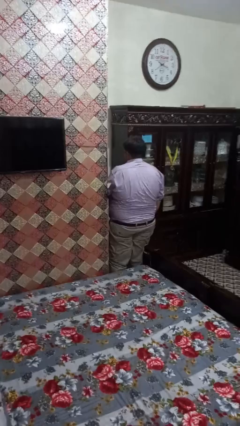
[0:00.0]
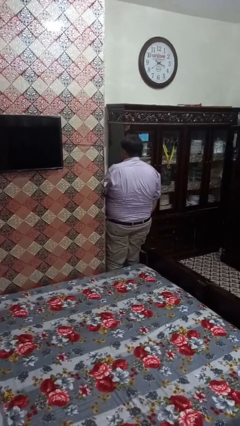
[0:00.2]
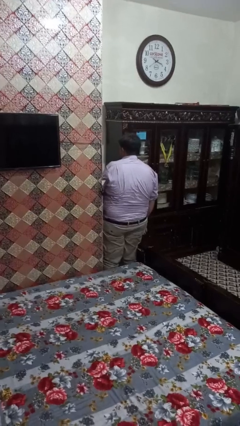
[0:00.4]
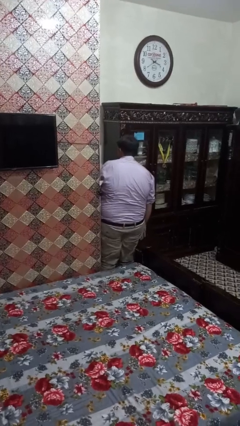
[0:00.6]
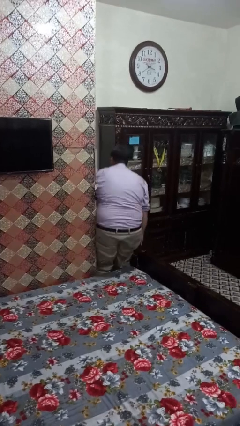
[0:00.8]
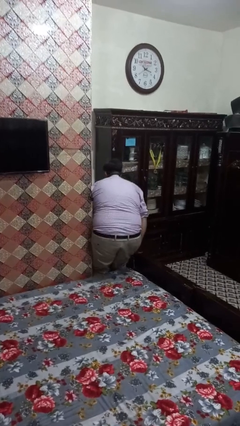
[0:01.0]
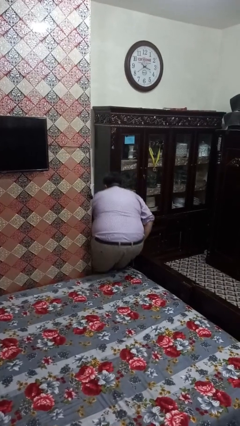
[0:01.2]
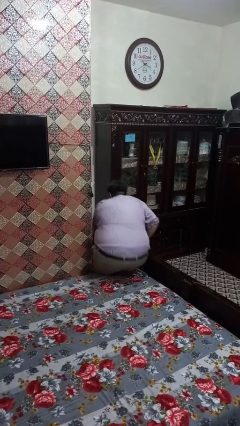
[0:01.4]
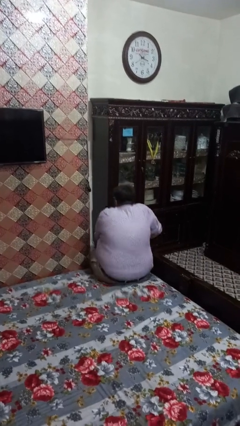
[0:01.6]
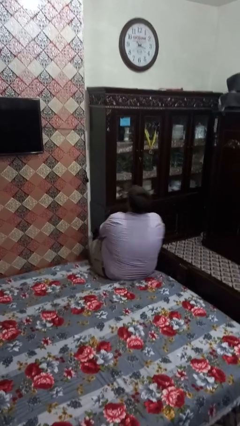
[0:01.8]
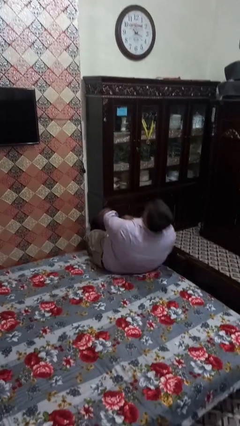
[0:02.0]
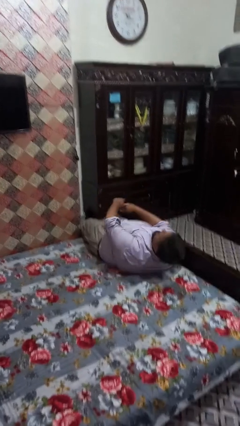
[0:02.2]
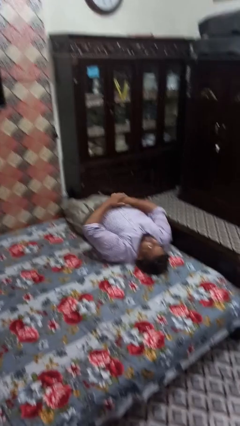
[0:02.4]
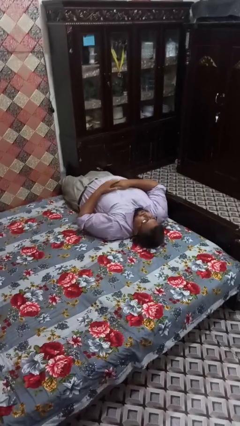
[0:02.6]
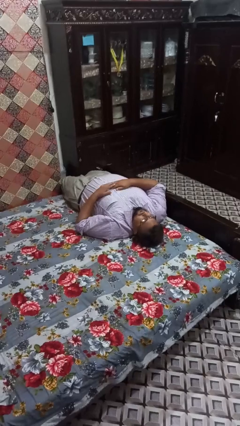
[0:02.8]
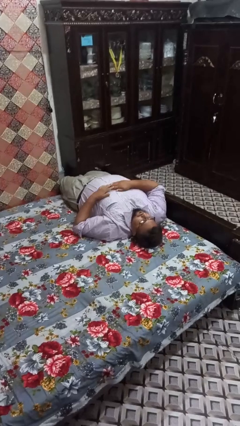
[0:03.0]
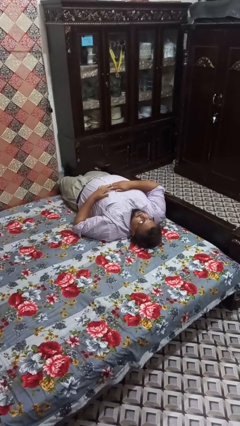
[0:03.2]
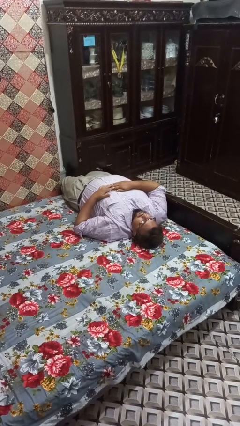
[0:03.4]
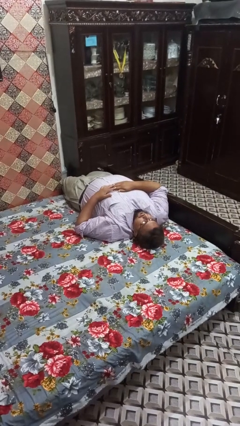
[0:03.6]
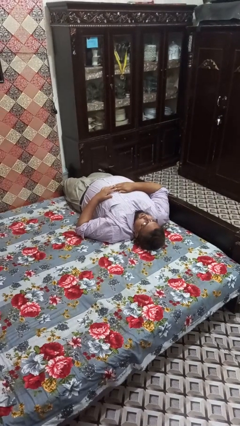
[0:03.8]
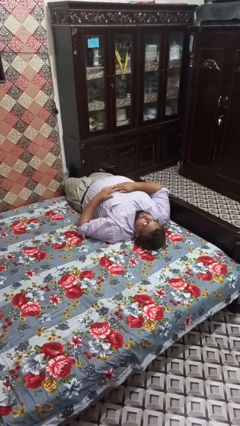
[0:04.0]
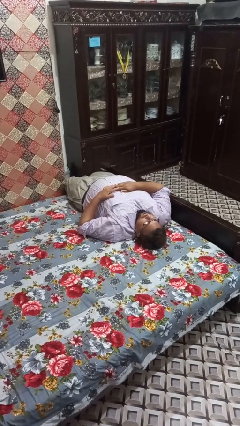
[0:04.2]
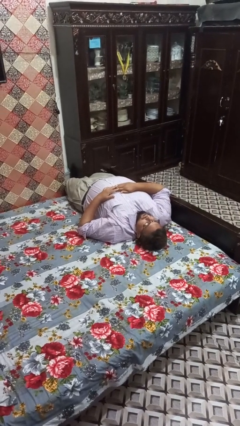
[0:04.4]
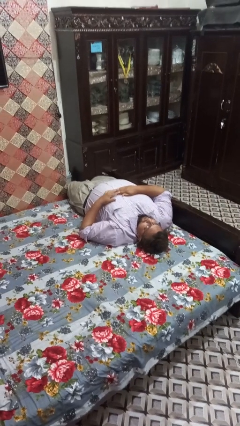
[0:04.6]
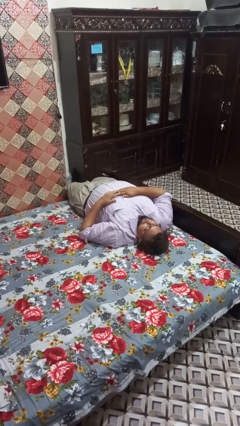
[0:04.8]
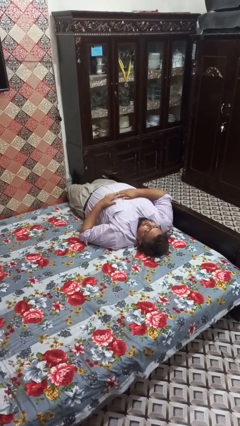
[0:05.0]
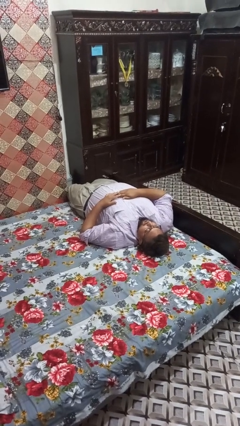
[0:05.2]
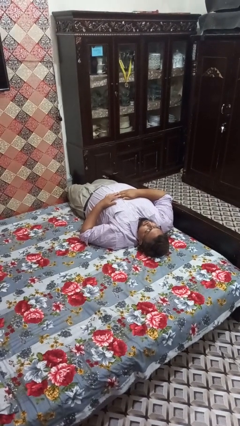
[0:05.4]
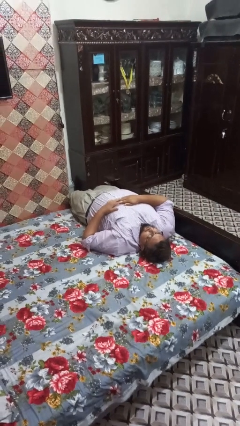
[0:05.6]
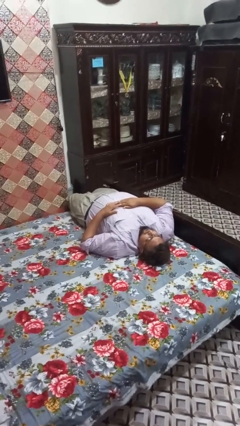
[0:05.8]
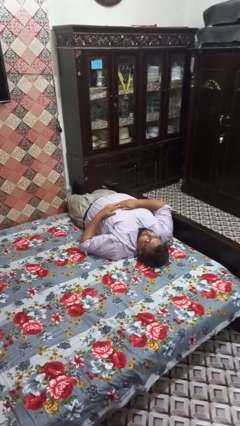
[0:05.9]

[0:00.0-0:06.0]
person lies down on bed

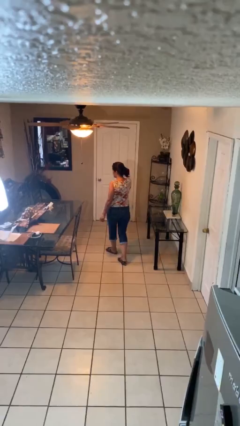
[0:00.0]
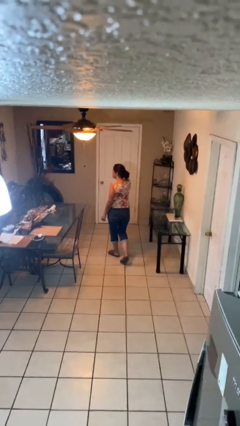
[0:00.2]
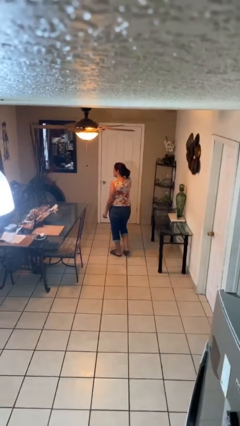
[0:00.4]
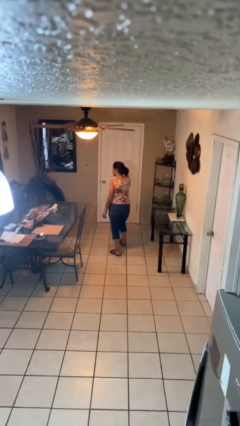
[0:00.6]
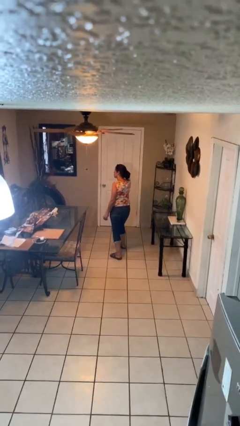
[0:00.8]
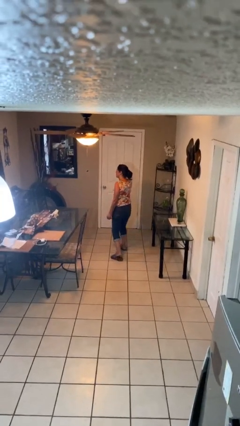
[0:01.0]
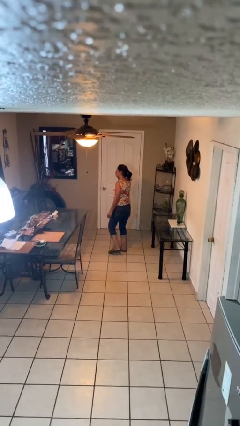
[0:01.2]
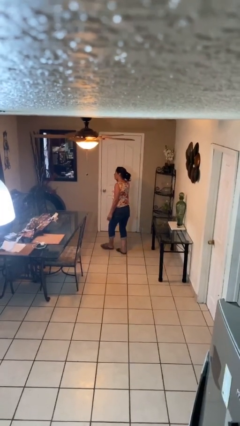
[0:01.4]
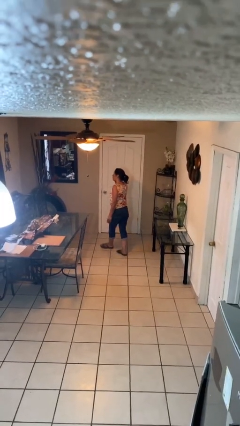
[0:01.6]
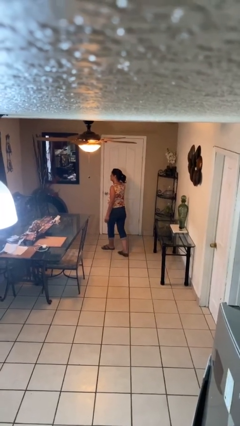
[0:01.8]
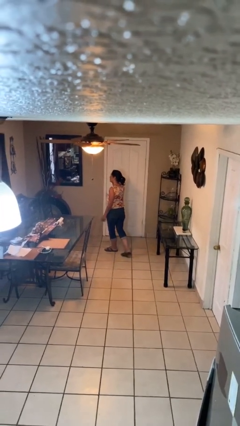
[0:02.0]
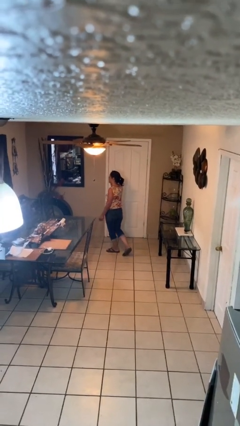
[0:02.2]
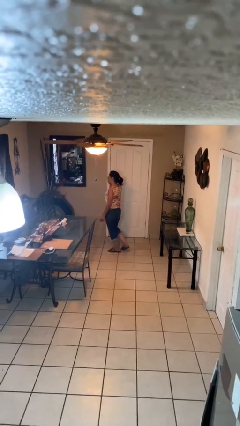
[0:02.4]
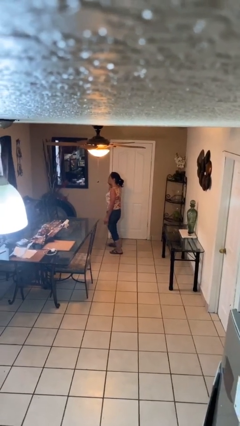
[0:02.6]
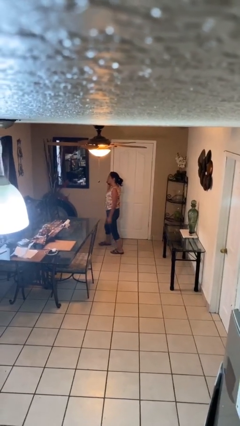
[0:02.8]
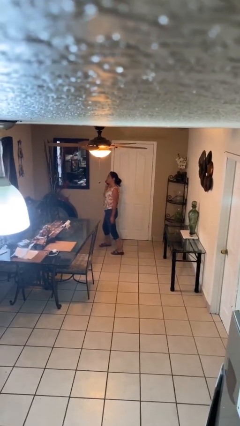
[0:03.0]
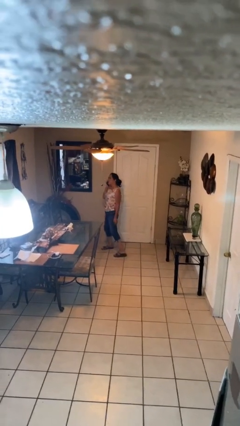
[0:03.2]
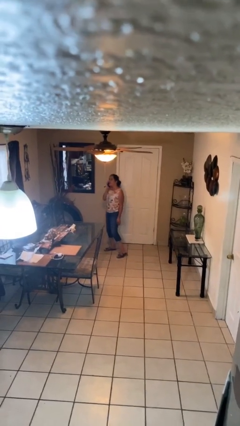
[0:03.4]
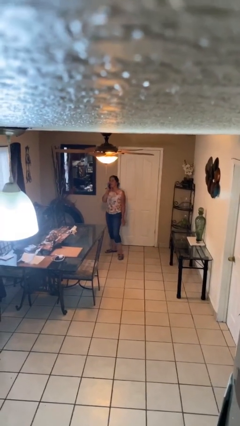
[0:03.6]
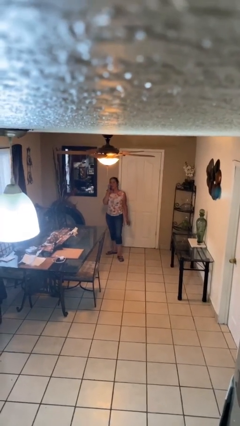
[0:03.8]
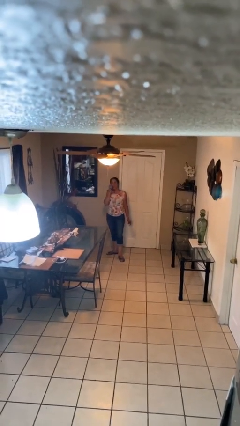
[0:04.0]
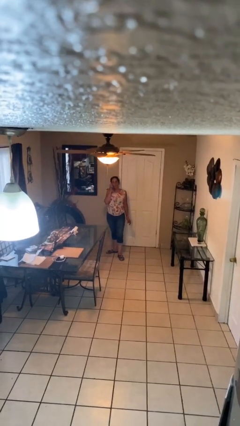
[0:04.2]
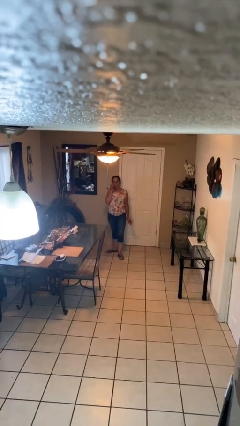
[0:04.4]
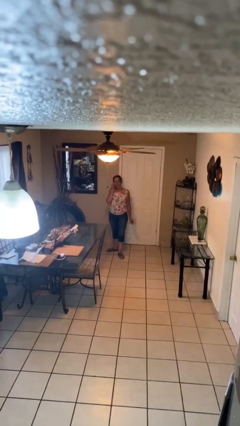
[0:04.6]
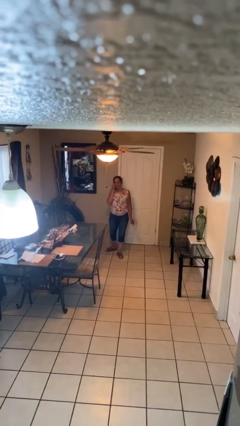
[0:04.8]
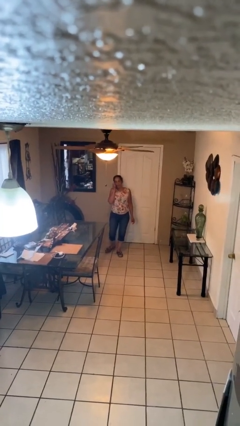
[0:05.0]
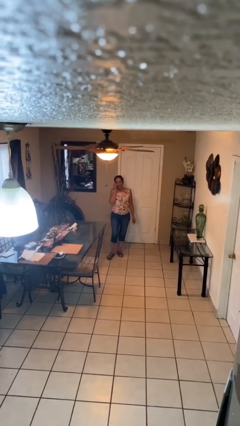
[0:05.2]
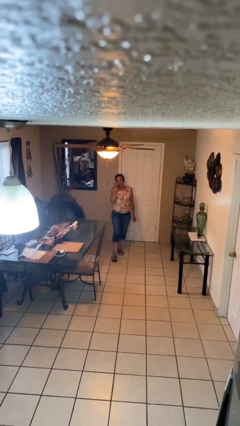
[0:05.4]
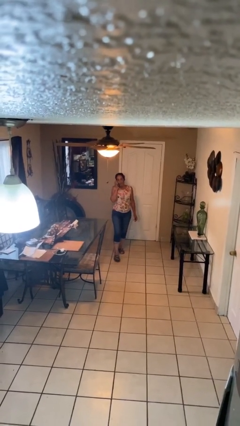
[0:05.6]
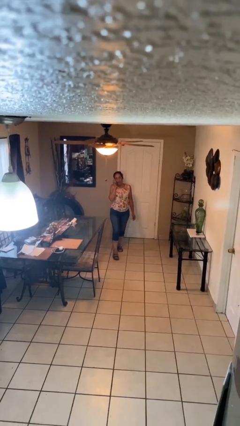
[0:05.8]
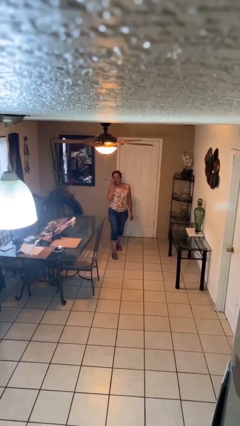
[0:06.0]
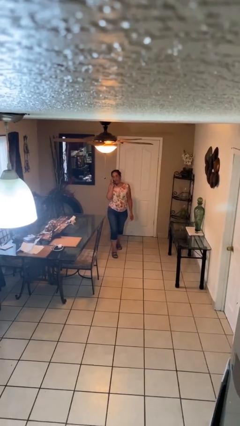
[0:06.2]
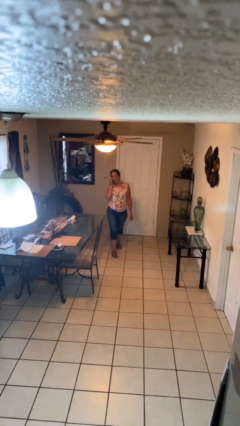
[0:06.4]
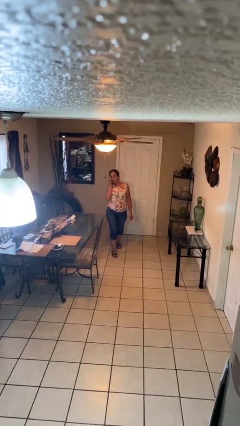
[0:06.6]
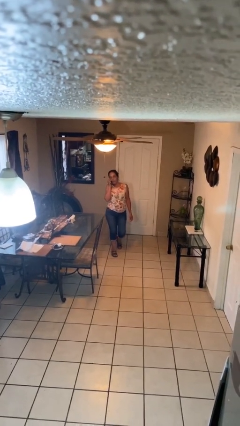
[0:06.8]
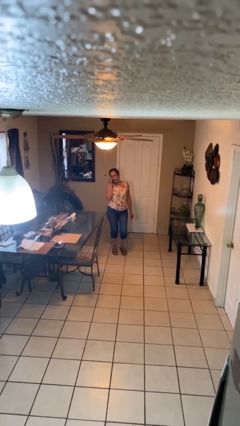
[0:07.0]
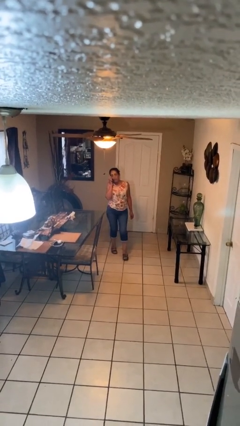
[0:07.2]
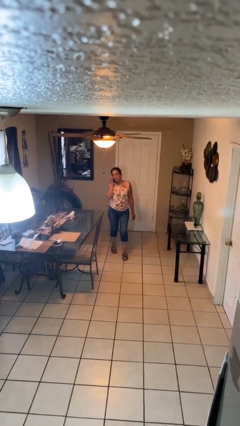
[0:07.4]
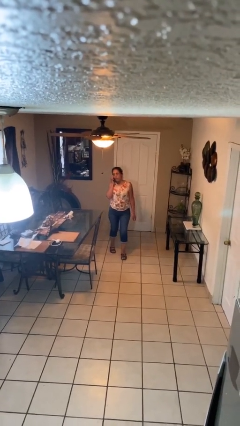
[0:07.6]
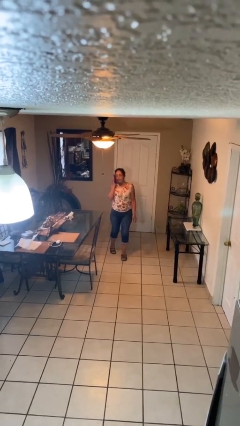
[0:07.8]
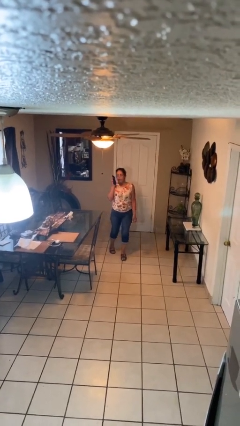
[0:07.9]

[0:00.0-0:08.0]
person talks on phone

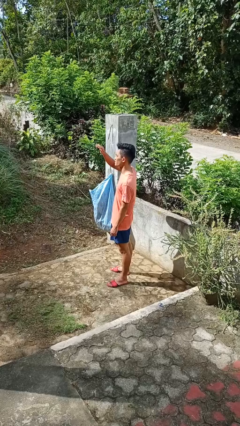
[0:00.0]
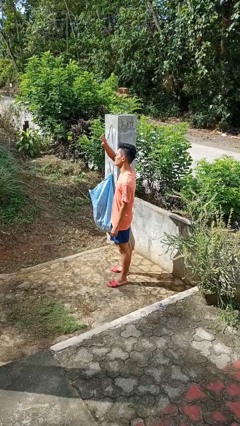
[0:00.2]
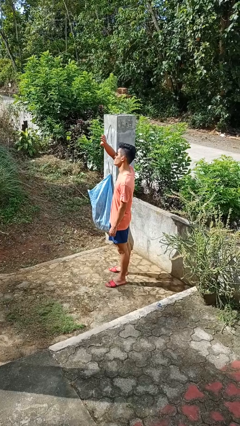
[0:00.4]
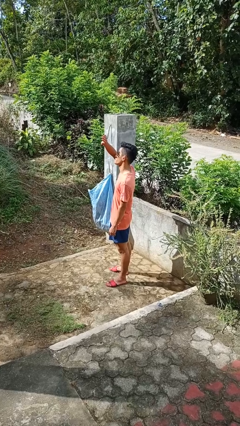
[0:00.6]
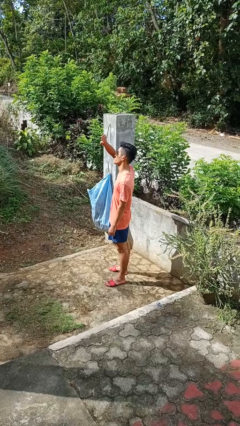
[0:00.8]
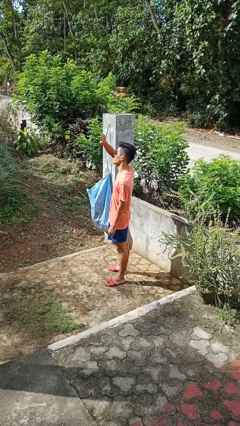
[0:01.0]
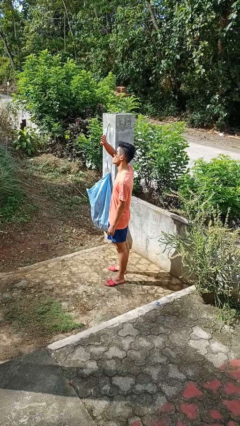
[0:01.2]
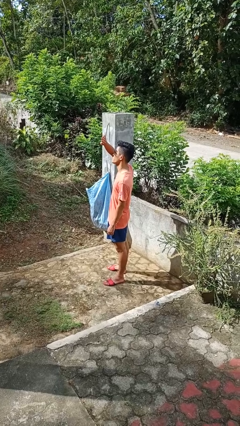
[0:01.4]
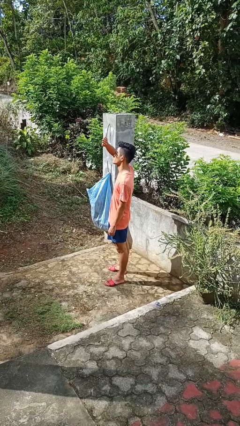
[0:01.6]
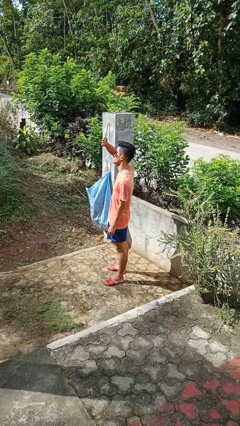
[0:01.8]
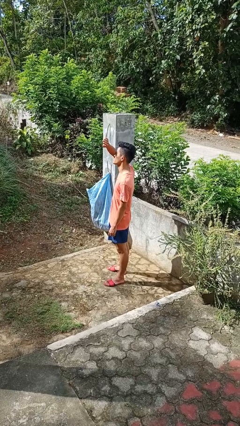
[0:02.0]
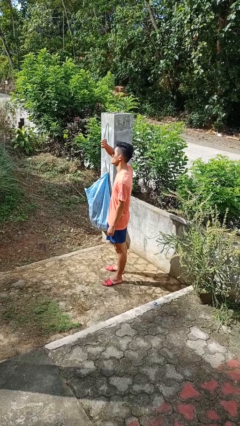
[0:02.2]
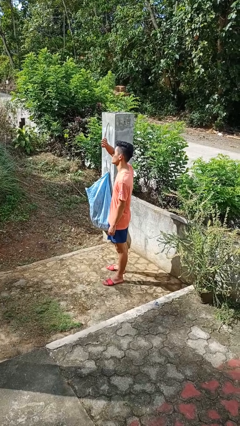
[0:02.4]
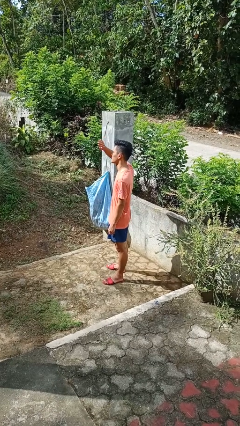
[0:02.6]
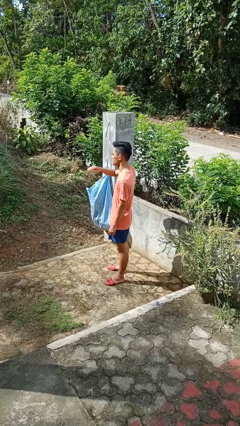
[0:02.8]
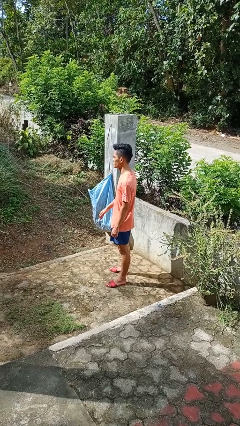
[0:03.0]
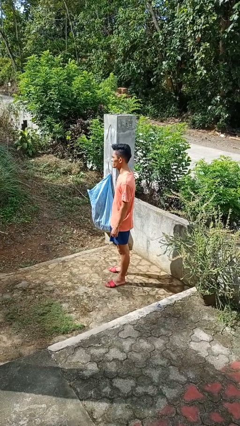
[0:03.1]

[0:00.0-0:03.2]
person shades eyes

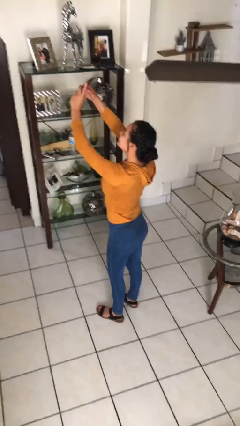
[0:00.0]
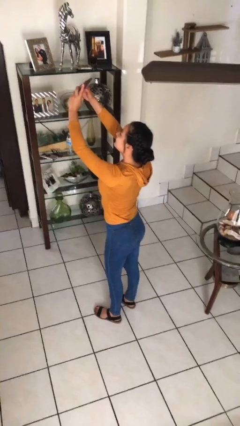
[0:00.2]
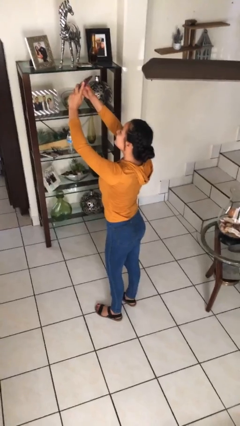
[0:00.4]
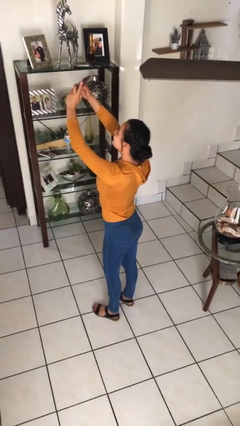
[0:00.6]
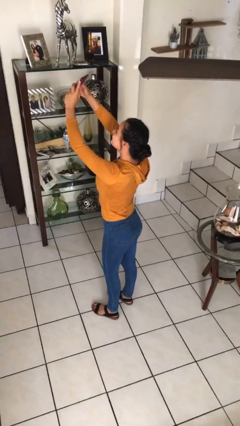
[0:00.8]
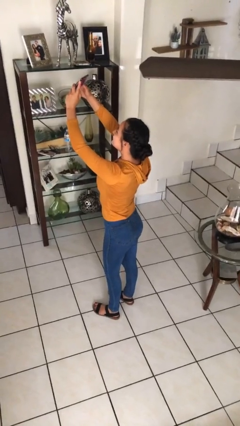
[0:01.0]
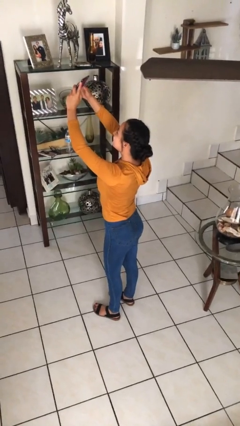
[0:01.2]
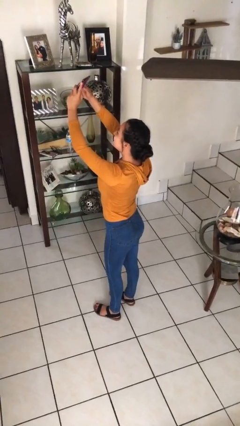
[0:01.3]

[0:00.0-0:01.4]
person takes selfie
